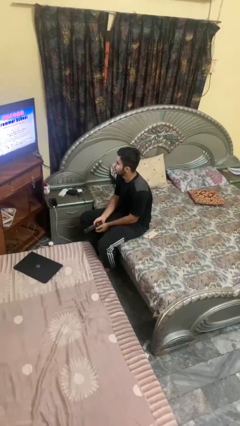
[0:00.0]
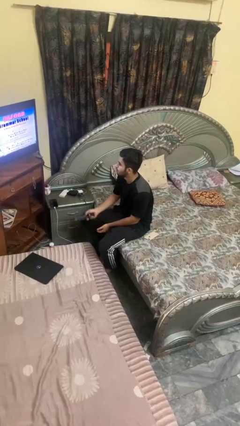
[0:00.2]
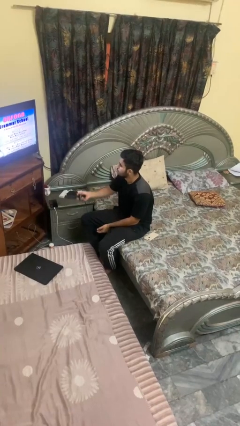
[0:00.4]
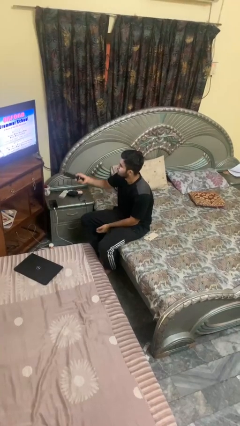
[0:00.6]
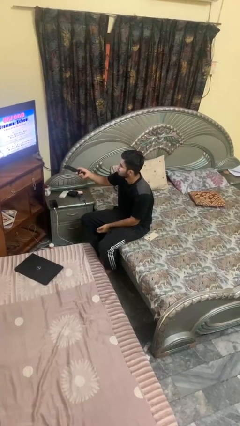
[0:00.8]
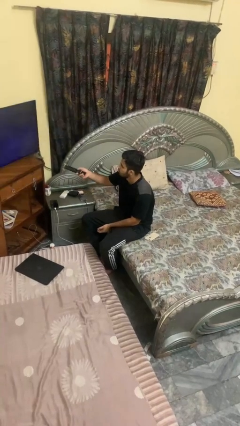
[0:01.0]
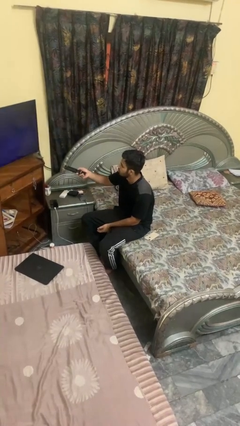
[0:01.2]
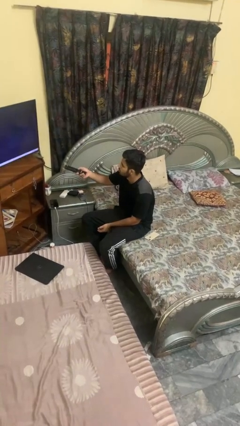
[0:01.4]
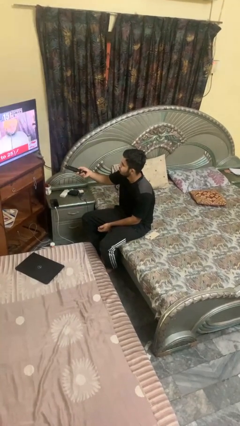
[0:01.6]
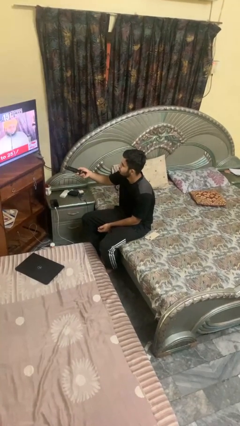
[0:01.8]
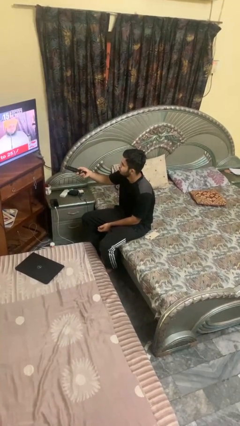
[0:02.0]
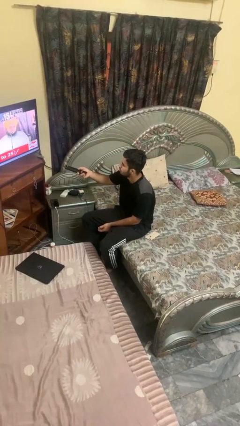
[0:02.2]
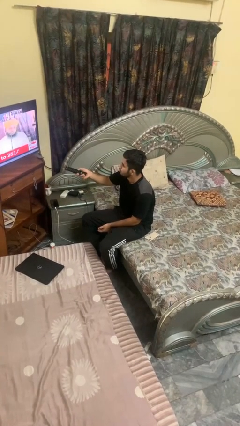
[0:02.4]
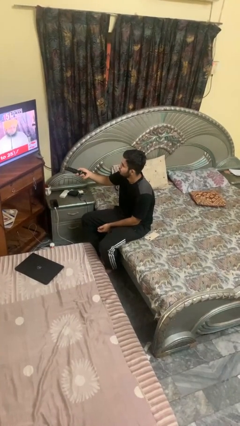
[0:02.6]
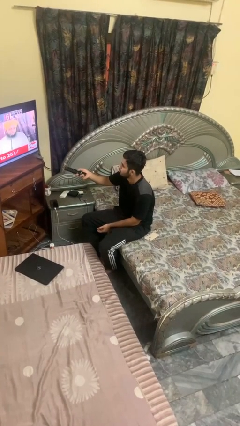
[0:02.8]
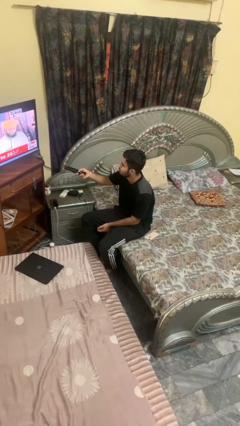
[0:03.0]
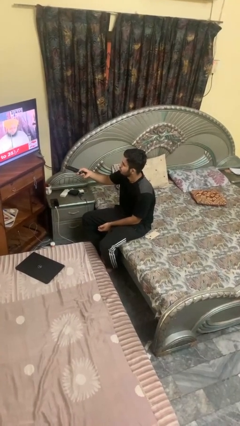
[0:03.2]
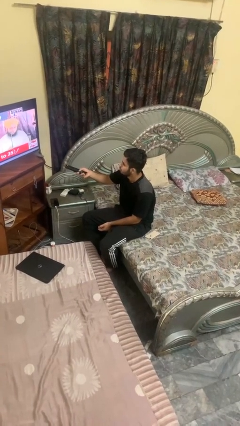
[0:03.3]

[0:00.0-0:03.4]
person uses television remote

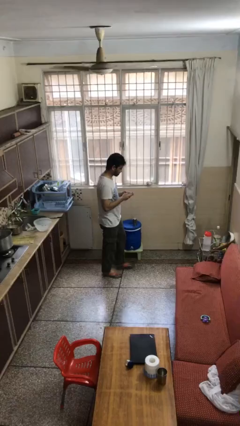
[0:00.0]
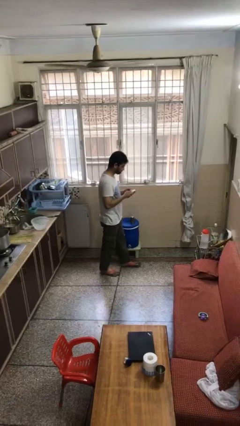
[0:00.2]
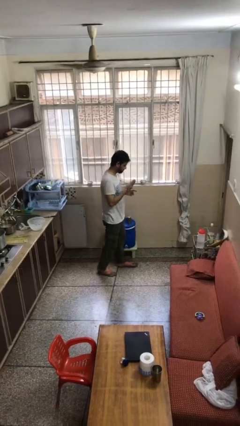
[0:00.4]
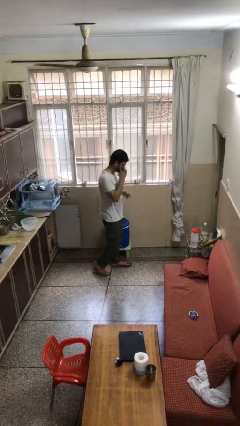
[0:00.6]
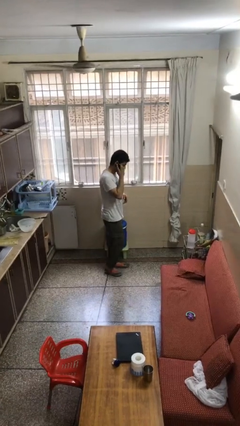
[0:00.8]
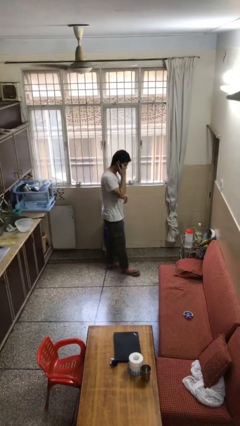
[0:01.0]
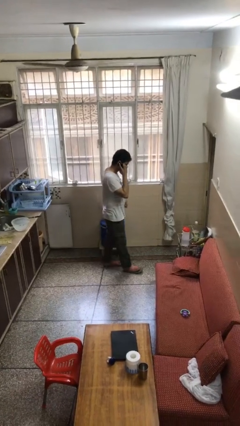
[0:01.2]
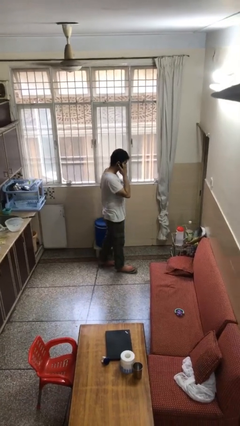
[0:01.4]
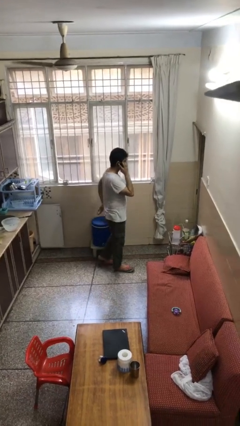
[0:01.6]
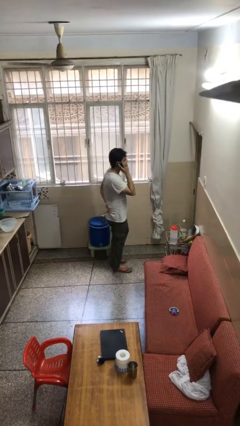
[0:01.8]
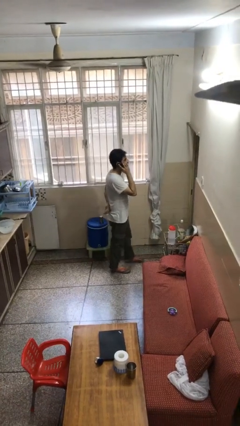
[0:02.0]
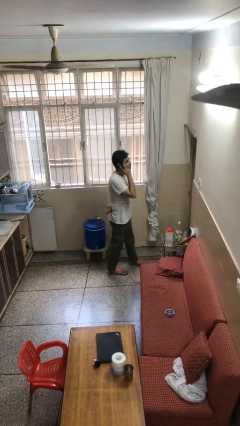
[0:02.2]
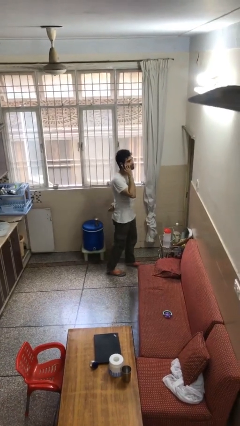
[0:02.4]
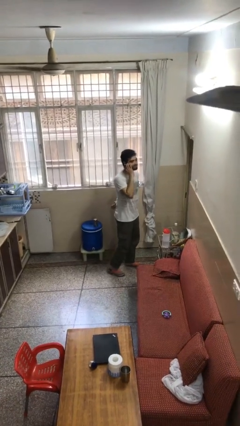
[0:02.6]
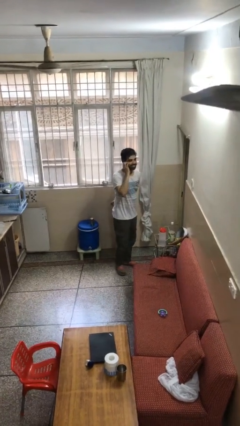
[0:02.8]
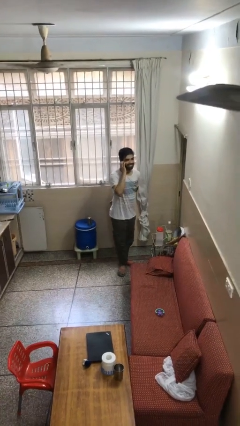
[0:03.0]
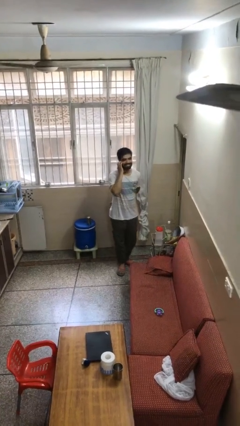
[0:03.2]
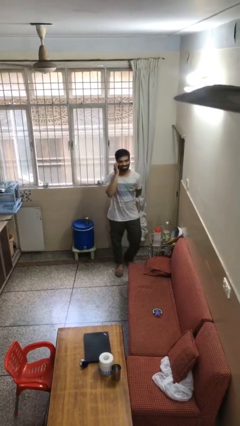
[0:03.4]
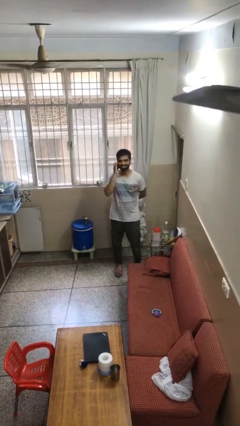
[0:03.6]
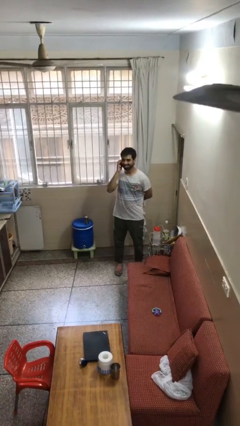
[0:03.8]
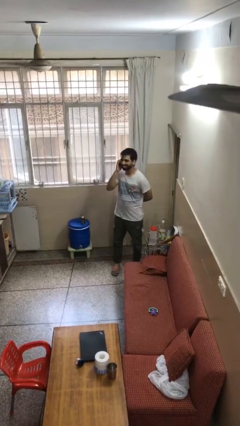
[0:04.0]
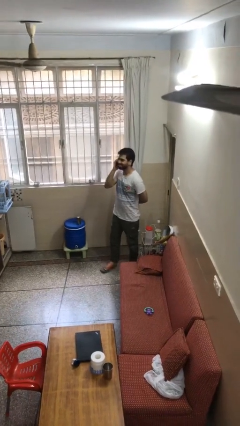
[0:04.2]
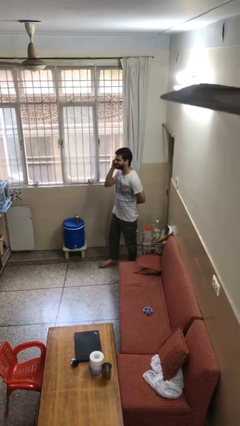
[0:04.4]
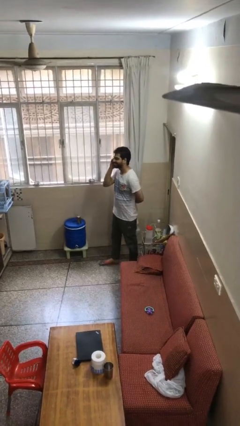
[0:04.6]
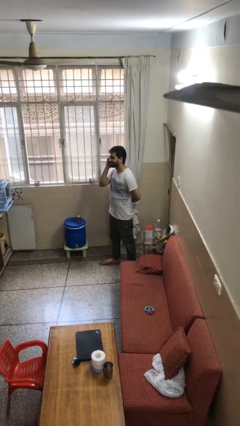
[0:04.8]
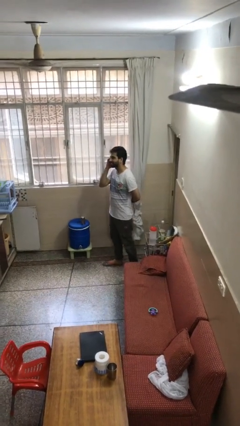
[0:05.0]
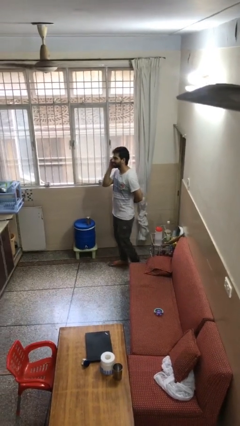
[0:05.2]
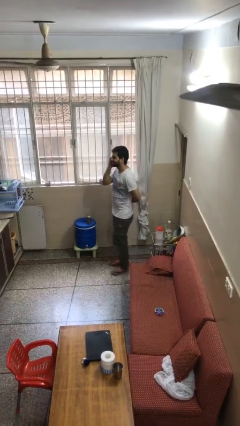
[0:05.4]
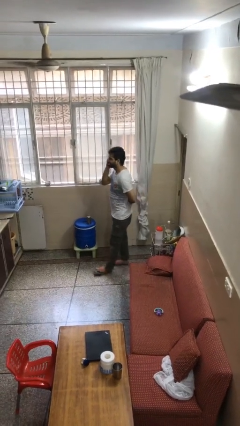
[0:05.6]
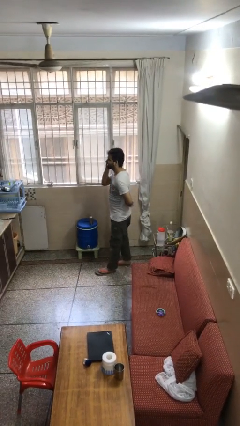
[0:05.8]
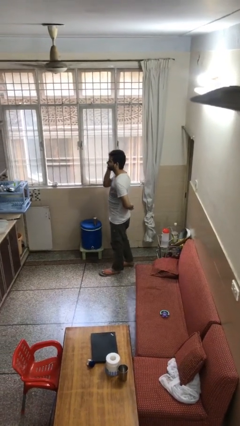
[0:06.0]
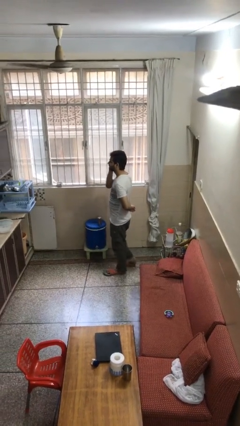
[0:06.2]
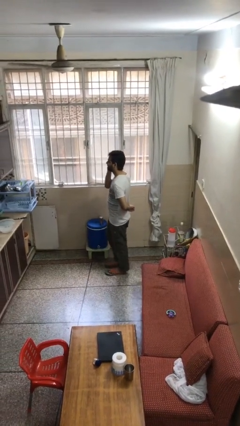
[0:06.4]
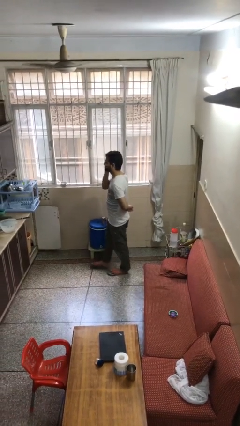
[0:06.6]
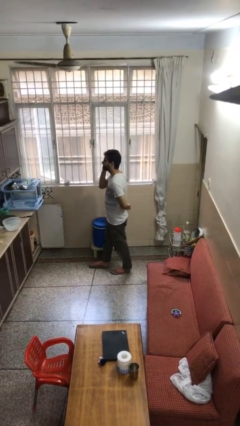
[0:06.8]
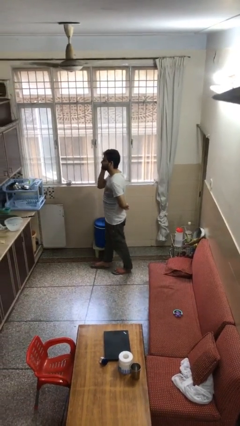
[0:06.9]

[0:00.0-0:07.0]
person talks on phone

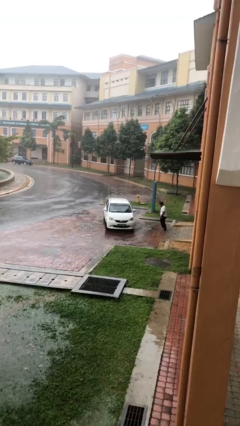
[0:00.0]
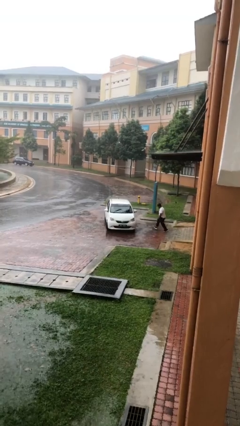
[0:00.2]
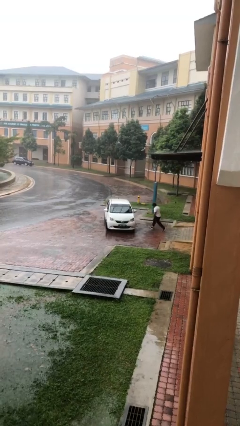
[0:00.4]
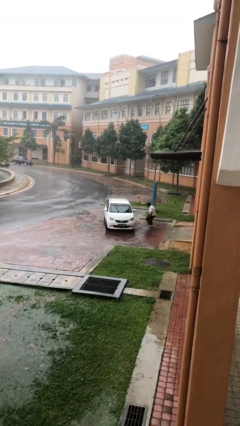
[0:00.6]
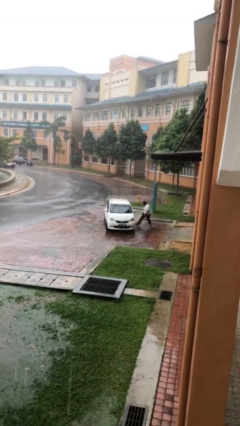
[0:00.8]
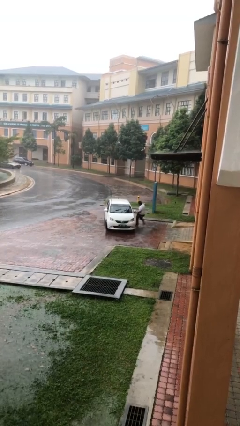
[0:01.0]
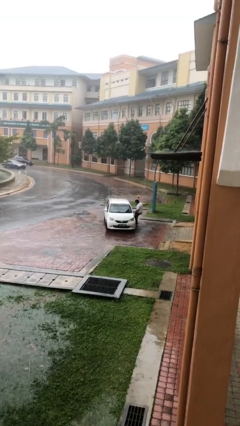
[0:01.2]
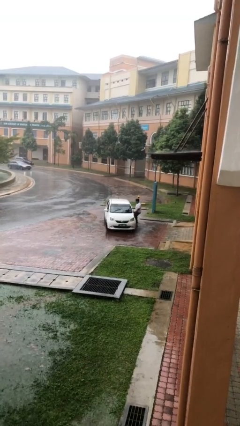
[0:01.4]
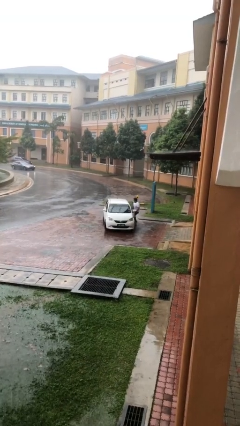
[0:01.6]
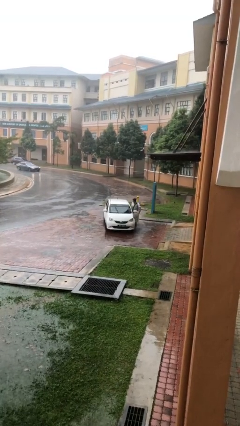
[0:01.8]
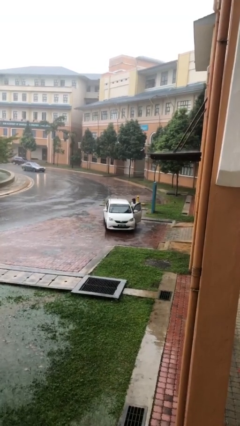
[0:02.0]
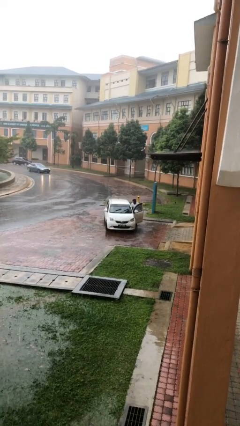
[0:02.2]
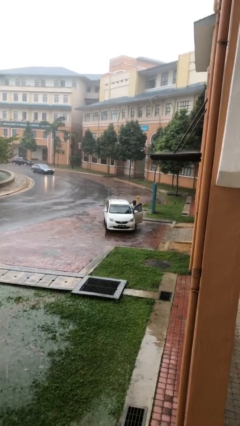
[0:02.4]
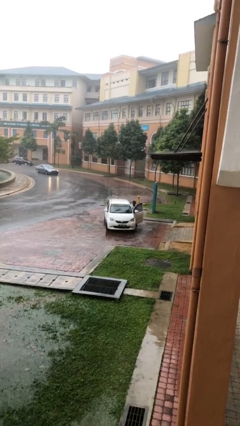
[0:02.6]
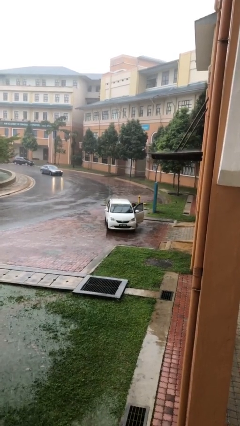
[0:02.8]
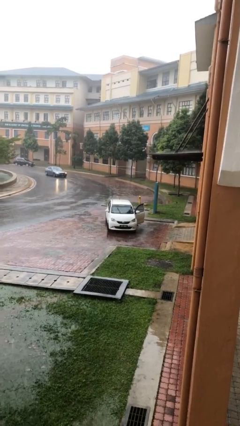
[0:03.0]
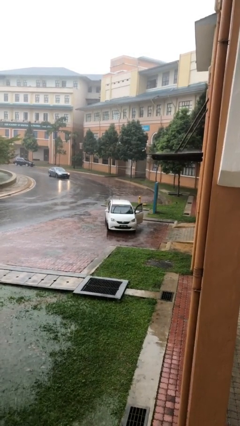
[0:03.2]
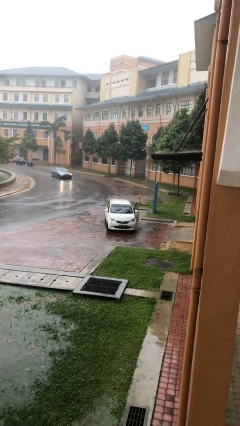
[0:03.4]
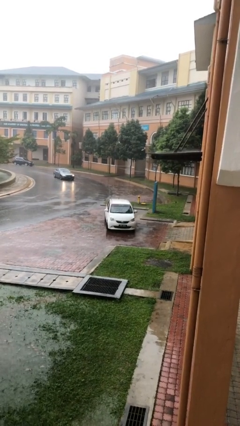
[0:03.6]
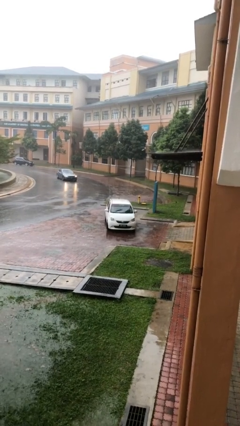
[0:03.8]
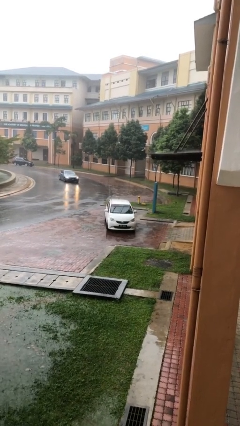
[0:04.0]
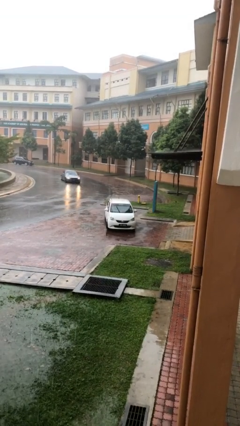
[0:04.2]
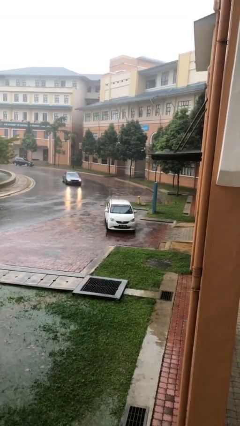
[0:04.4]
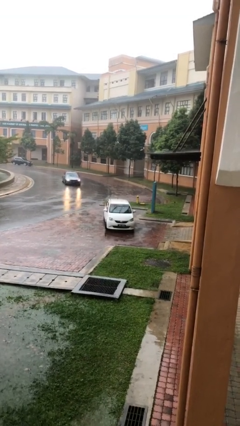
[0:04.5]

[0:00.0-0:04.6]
car picks up person

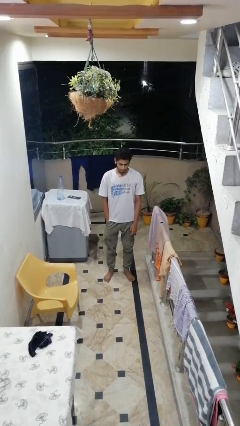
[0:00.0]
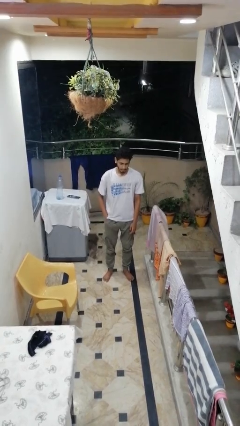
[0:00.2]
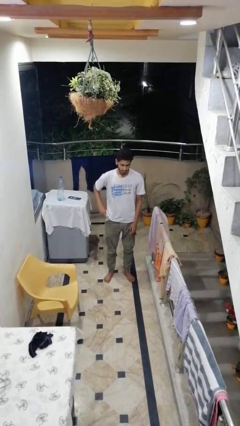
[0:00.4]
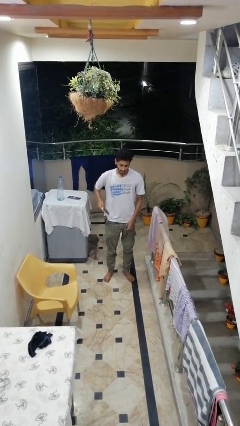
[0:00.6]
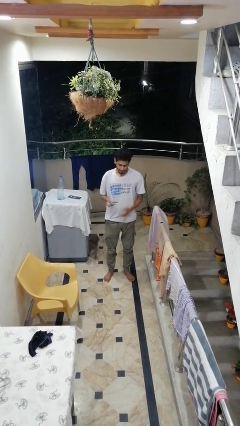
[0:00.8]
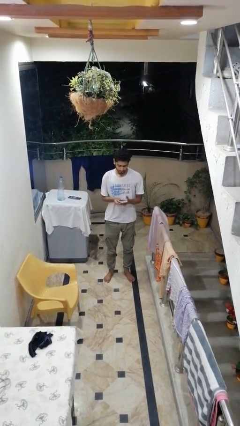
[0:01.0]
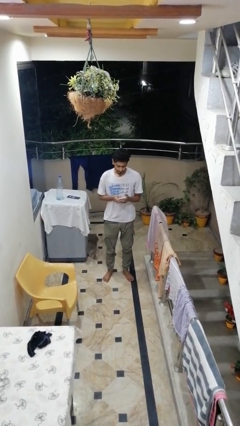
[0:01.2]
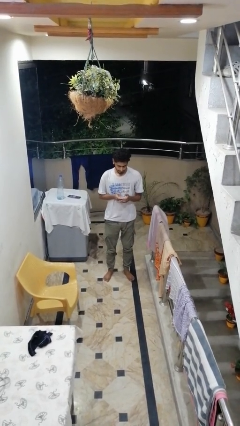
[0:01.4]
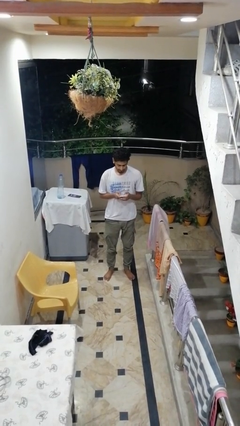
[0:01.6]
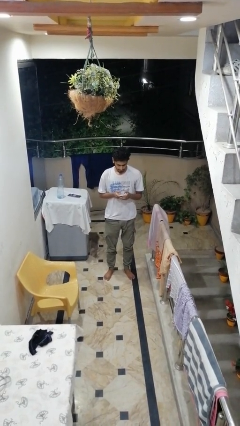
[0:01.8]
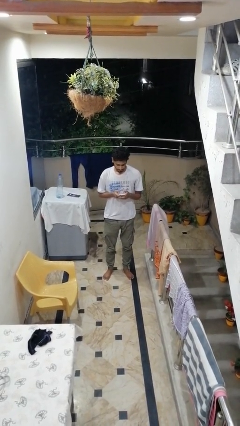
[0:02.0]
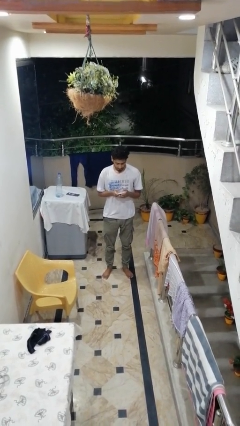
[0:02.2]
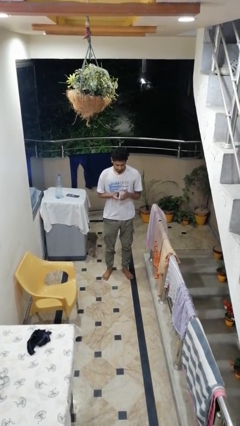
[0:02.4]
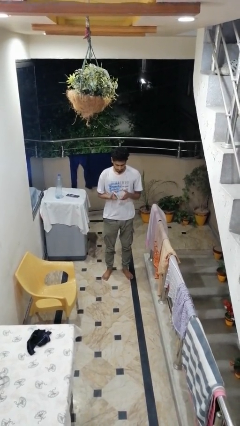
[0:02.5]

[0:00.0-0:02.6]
person takes phone from pocket
